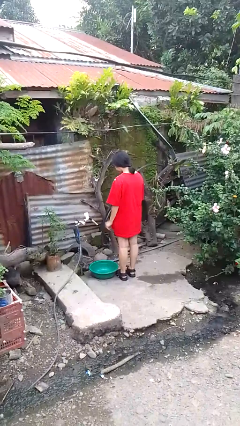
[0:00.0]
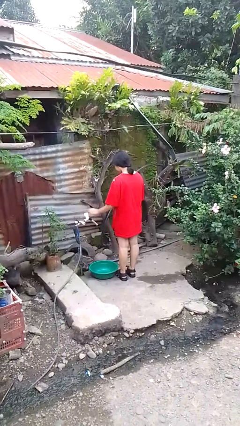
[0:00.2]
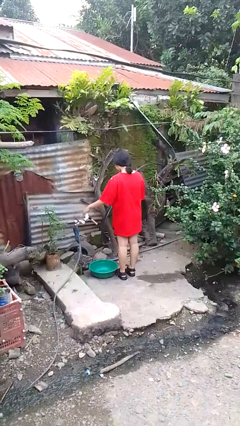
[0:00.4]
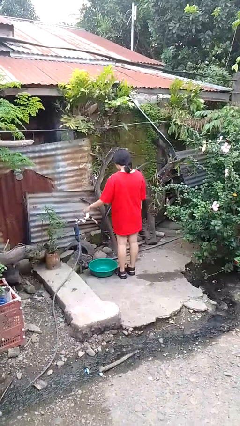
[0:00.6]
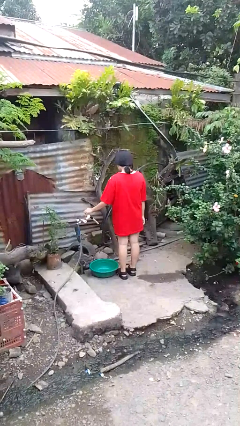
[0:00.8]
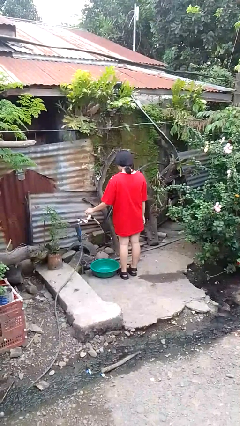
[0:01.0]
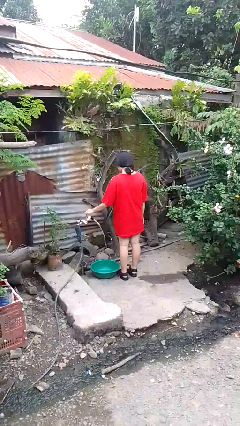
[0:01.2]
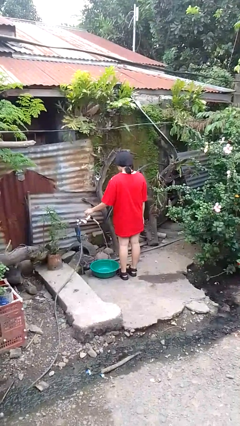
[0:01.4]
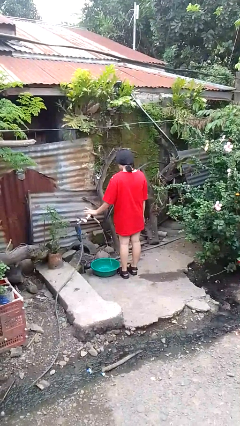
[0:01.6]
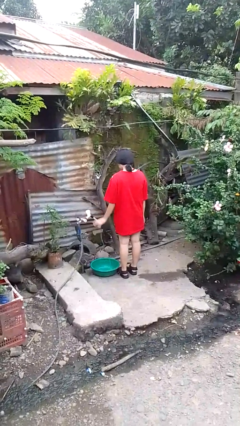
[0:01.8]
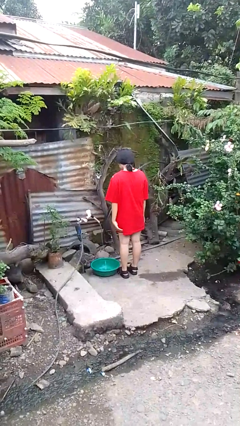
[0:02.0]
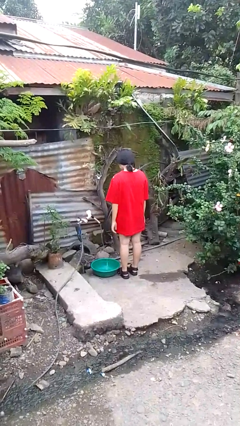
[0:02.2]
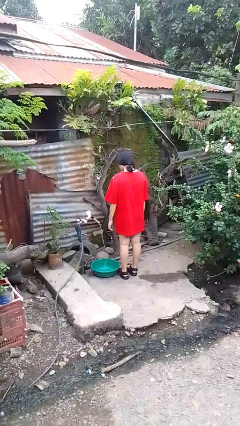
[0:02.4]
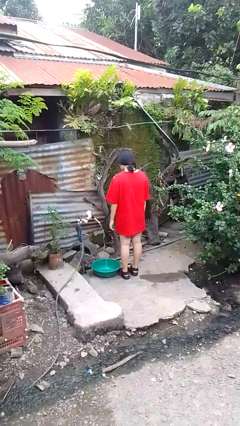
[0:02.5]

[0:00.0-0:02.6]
person turns on faucet

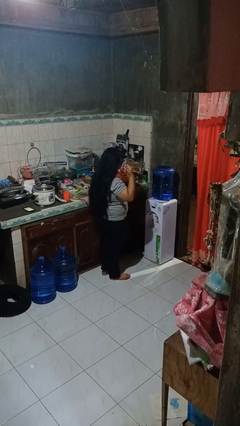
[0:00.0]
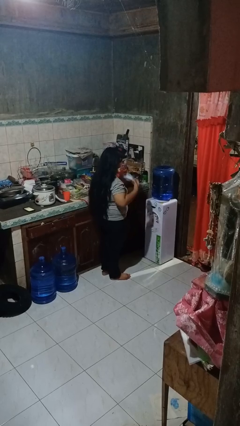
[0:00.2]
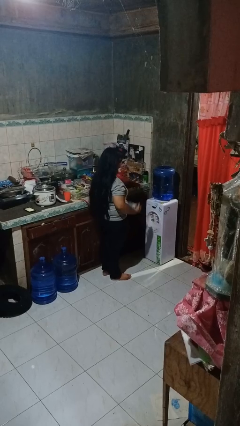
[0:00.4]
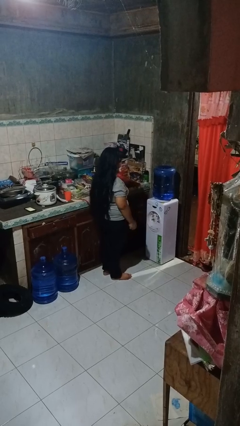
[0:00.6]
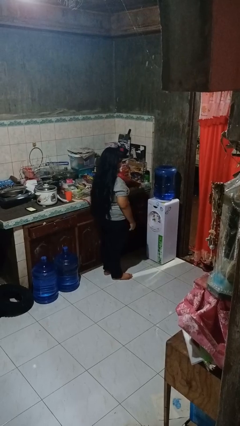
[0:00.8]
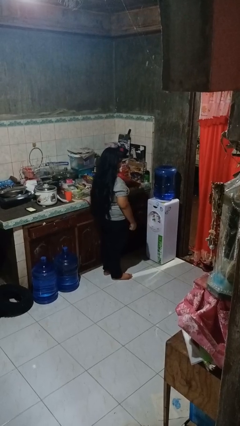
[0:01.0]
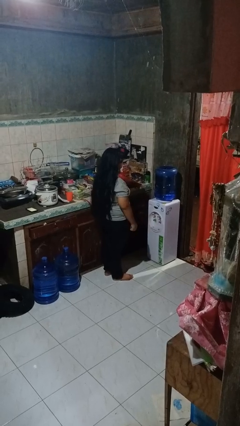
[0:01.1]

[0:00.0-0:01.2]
person takes off facemask

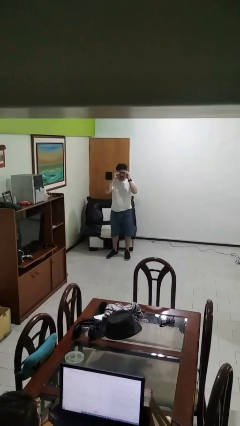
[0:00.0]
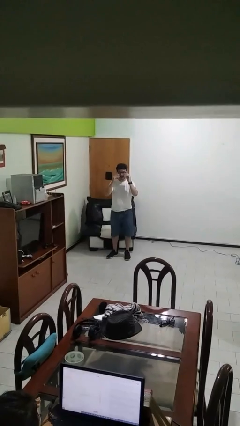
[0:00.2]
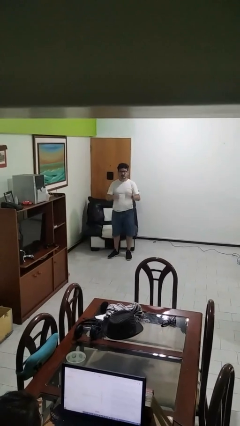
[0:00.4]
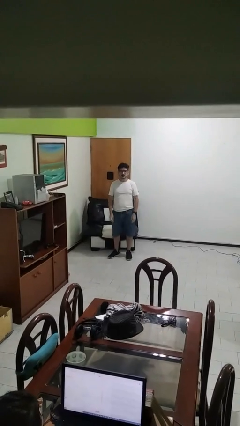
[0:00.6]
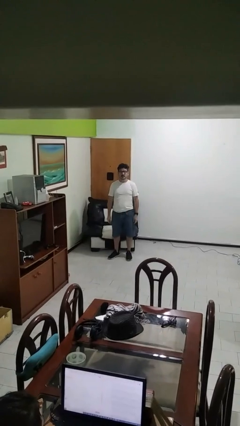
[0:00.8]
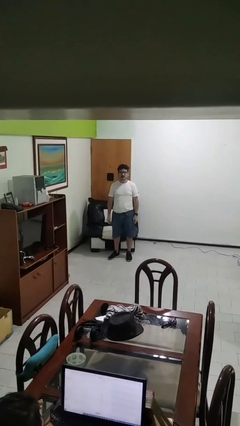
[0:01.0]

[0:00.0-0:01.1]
person puts on glasses

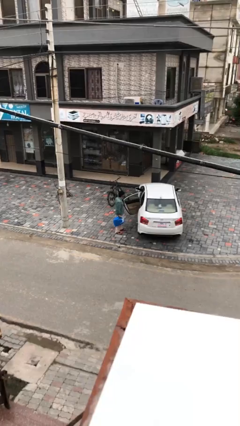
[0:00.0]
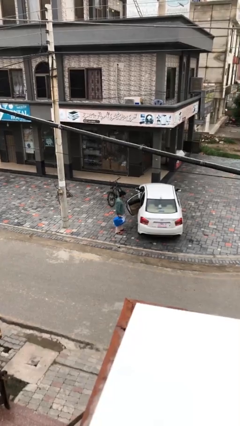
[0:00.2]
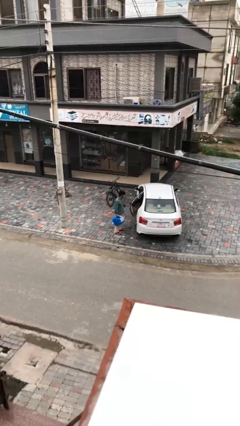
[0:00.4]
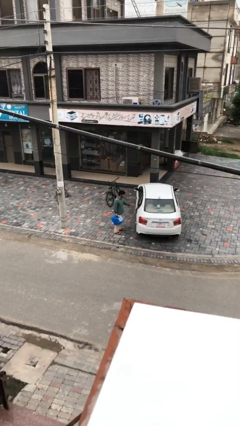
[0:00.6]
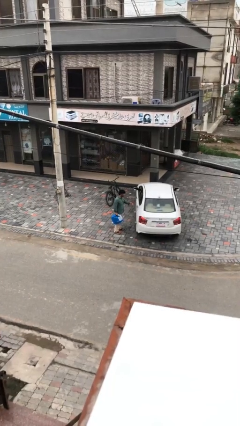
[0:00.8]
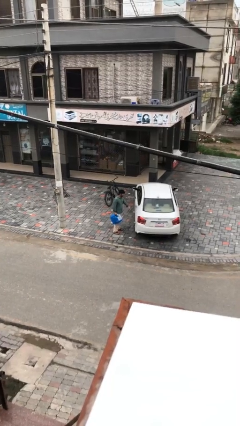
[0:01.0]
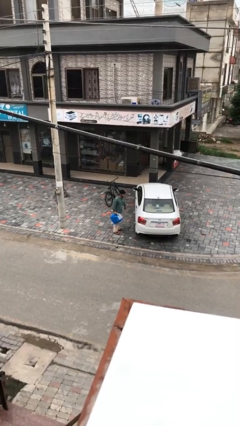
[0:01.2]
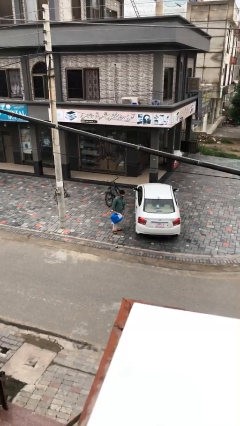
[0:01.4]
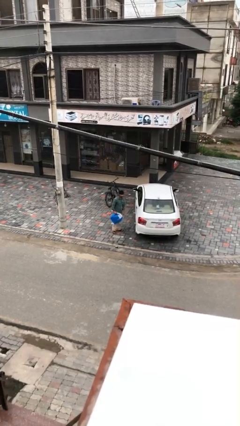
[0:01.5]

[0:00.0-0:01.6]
person closes car door

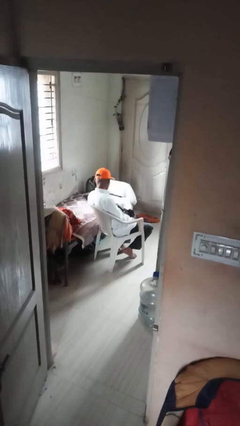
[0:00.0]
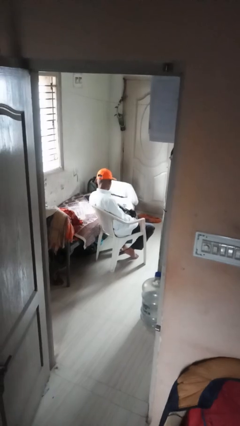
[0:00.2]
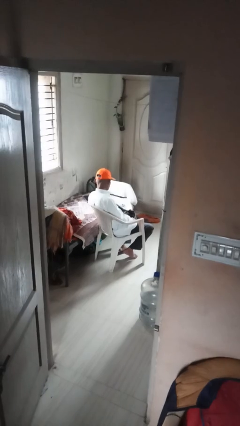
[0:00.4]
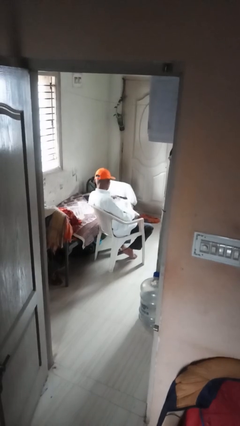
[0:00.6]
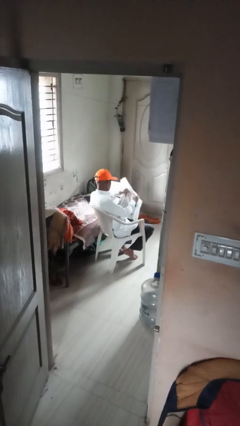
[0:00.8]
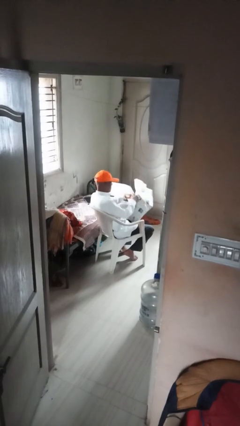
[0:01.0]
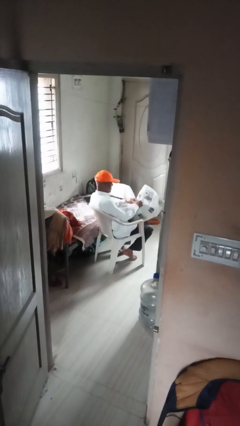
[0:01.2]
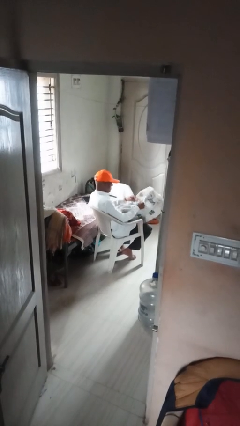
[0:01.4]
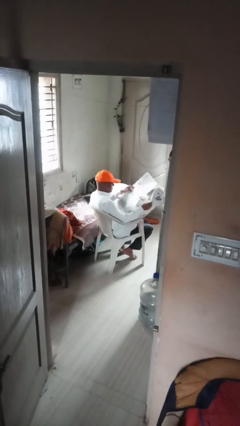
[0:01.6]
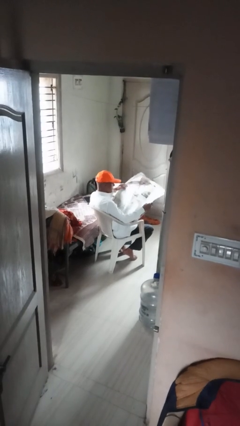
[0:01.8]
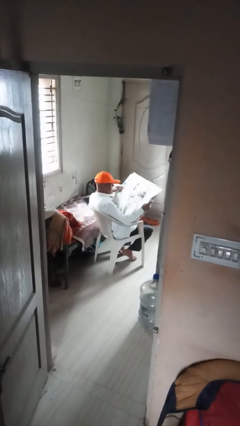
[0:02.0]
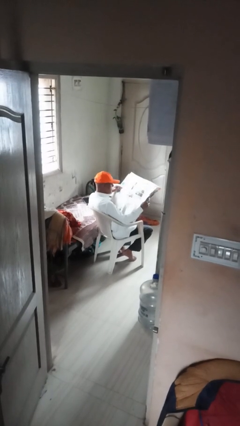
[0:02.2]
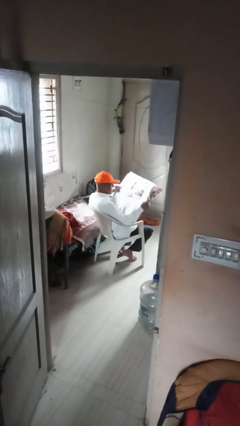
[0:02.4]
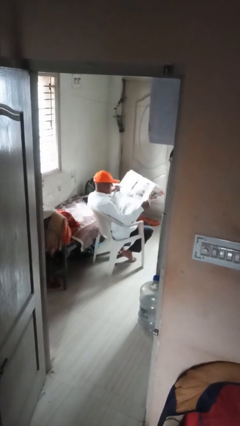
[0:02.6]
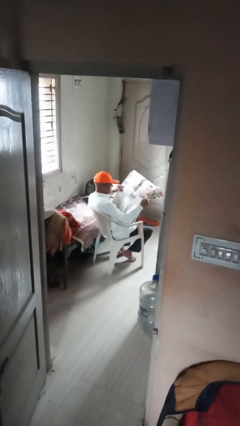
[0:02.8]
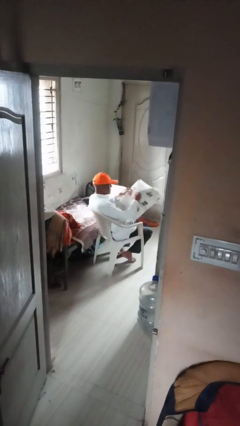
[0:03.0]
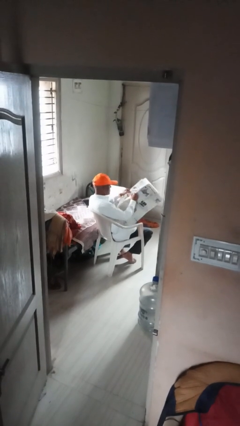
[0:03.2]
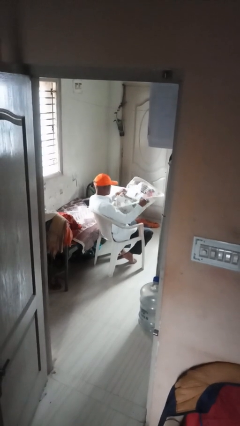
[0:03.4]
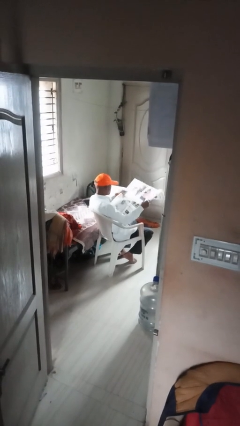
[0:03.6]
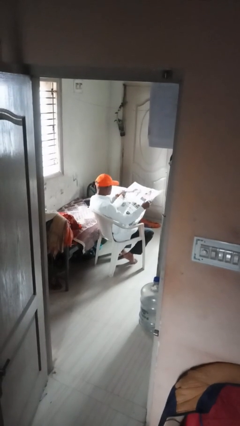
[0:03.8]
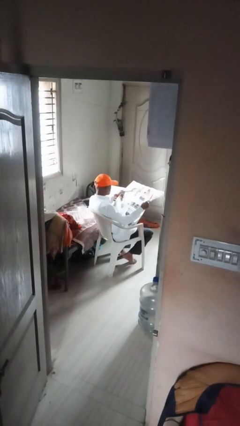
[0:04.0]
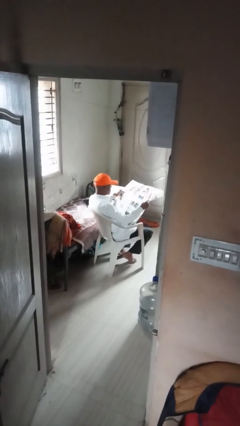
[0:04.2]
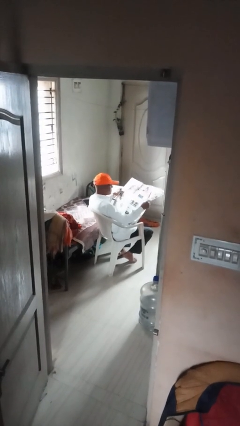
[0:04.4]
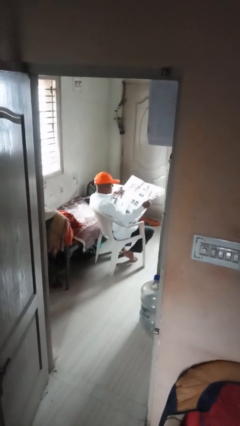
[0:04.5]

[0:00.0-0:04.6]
person reads newspaper

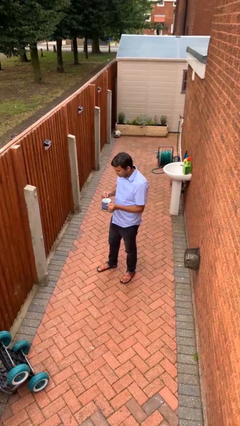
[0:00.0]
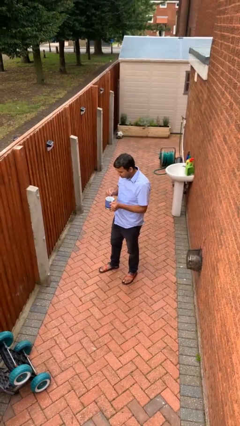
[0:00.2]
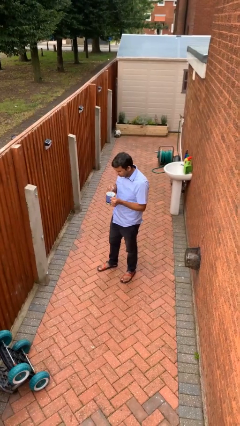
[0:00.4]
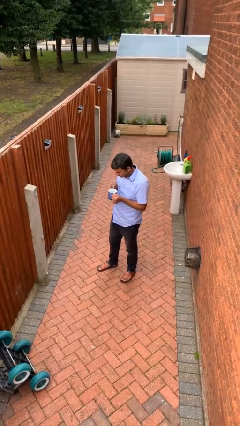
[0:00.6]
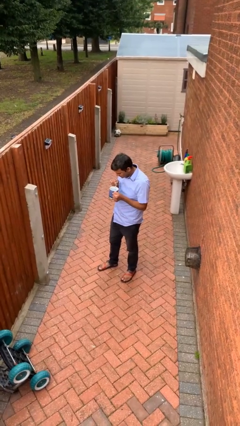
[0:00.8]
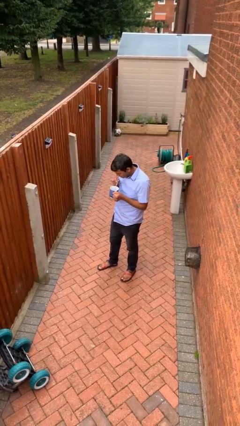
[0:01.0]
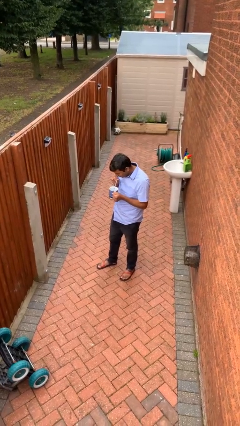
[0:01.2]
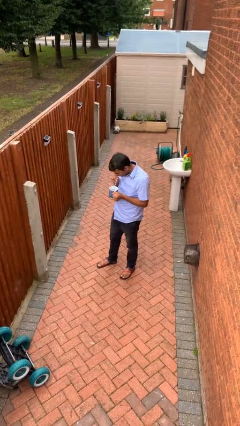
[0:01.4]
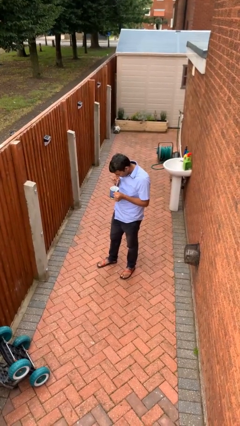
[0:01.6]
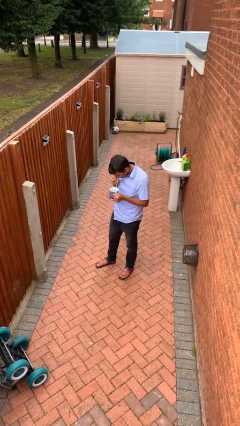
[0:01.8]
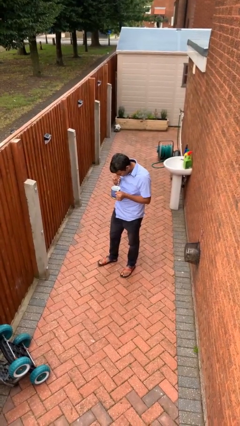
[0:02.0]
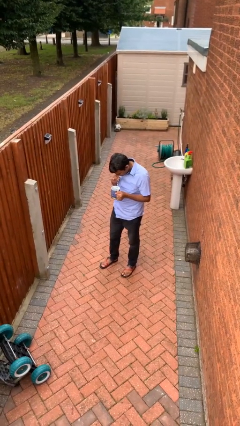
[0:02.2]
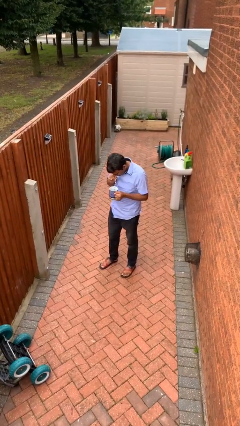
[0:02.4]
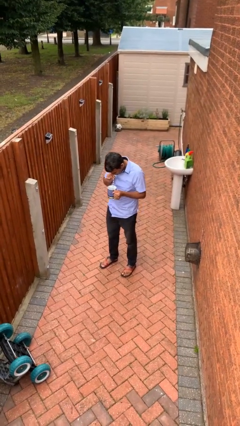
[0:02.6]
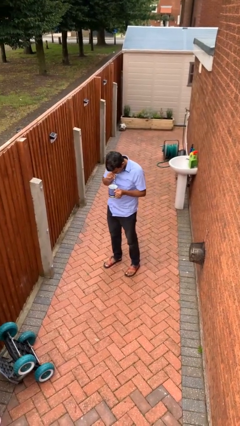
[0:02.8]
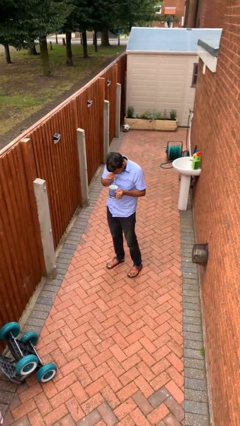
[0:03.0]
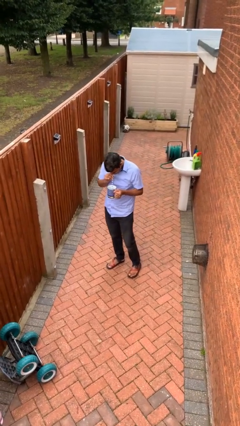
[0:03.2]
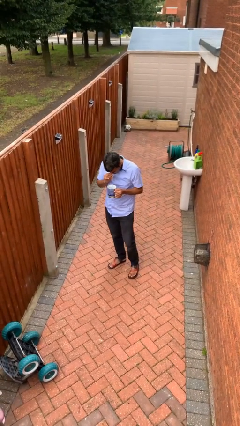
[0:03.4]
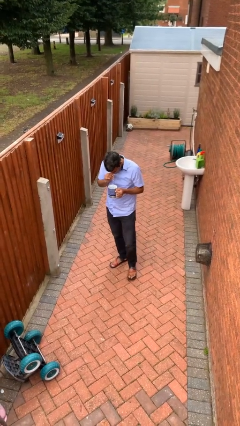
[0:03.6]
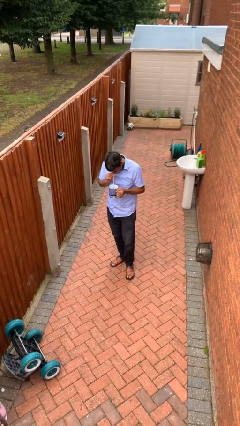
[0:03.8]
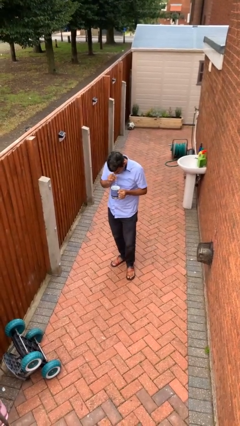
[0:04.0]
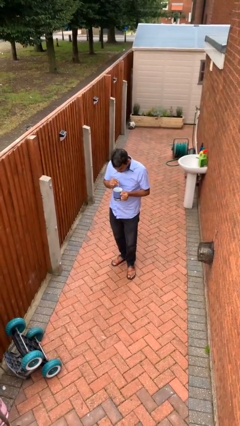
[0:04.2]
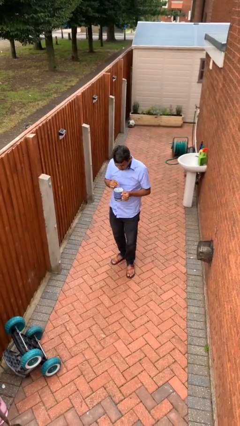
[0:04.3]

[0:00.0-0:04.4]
person drinks from straw

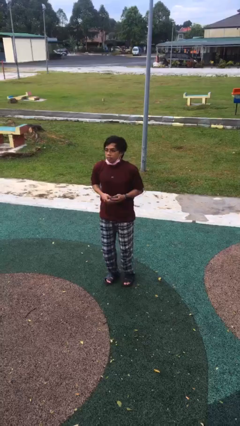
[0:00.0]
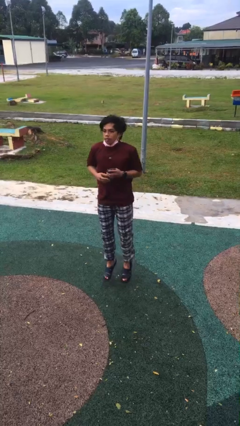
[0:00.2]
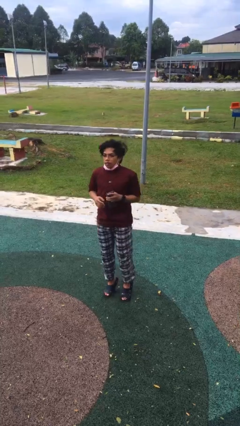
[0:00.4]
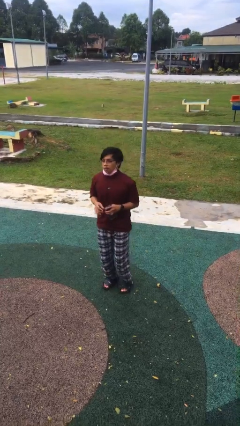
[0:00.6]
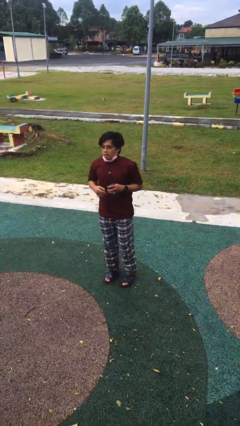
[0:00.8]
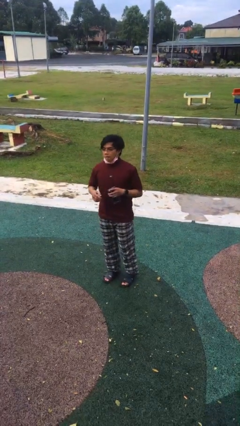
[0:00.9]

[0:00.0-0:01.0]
person jumps

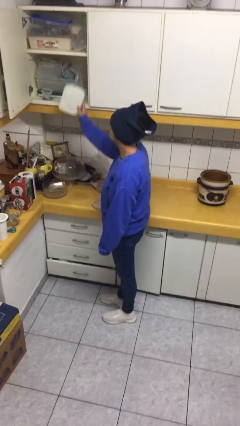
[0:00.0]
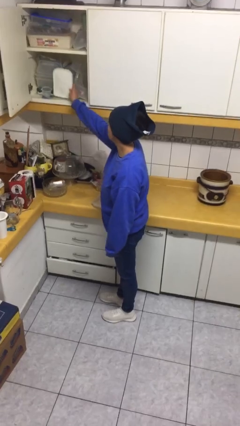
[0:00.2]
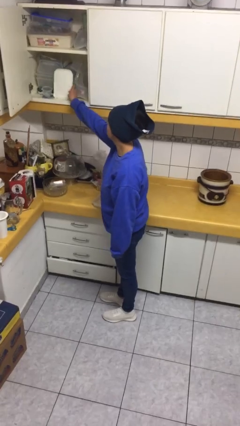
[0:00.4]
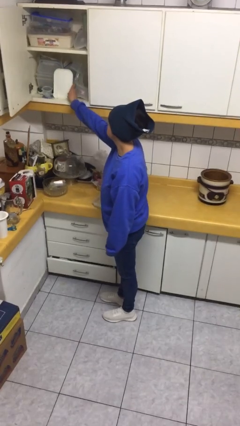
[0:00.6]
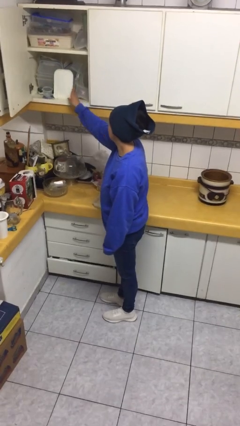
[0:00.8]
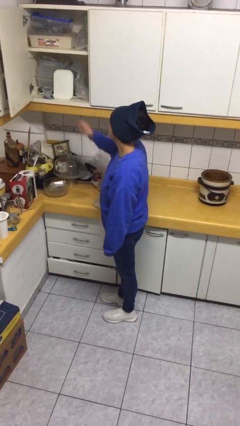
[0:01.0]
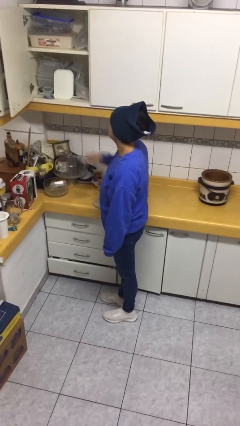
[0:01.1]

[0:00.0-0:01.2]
person puts object in cabinet
